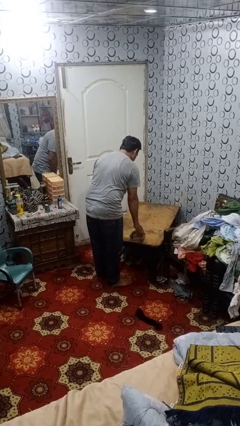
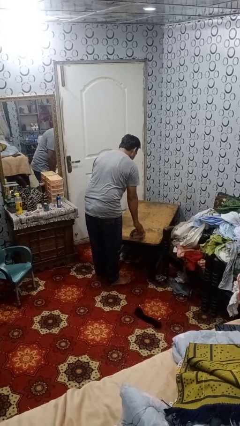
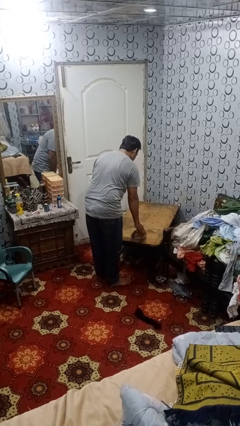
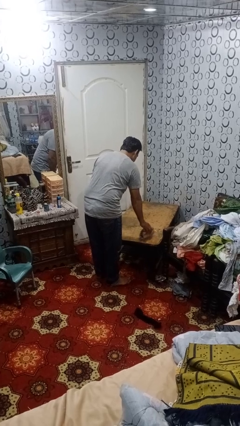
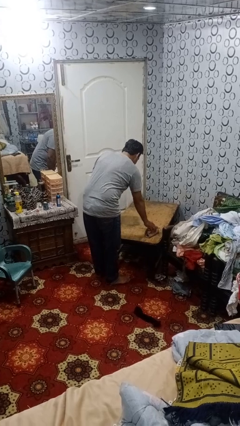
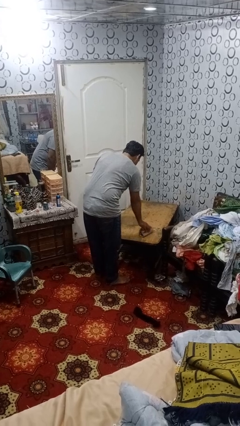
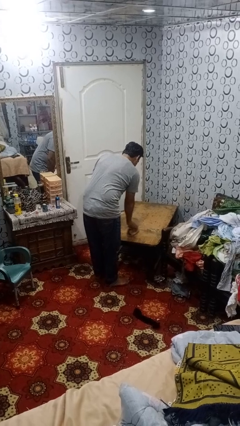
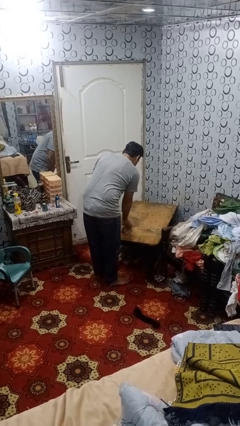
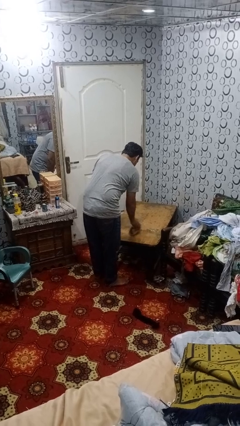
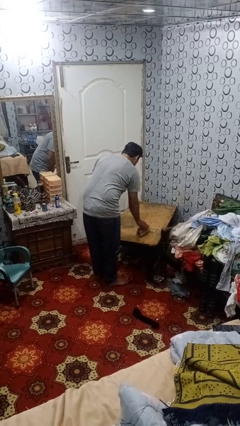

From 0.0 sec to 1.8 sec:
person cleans table with rag

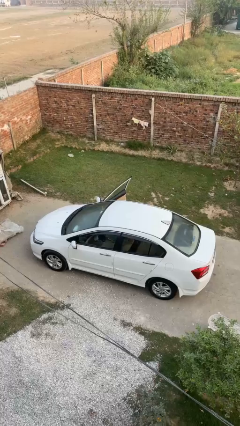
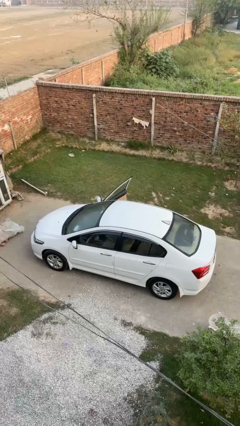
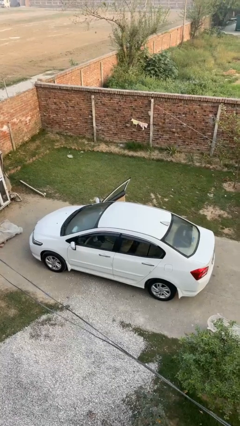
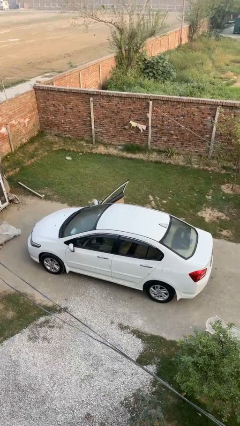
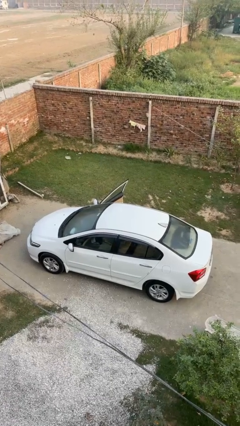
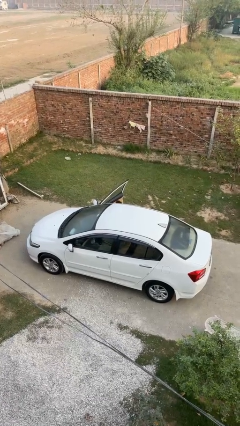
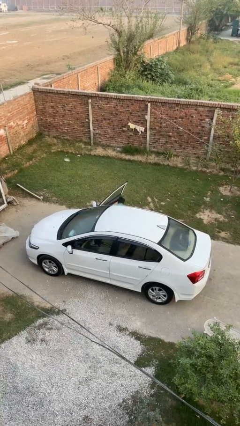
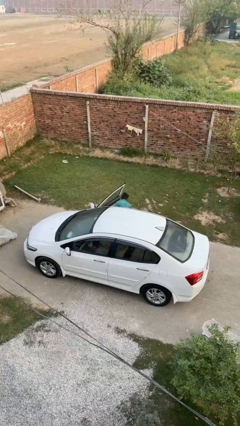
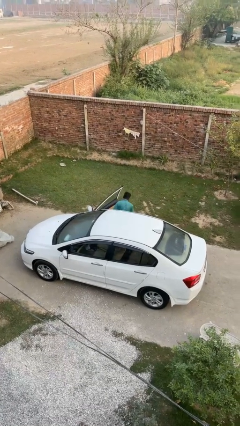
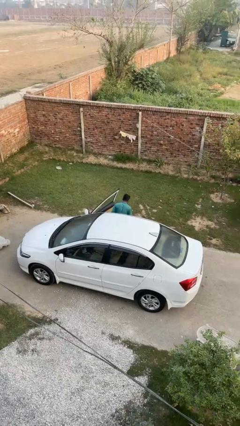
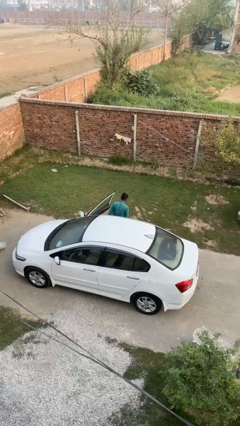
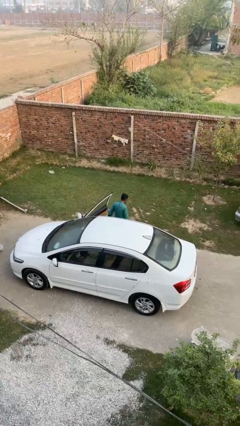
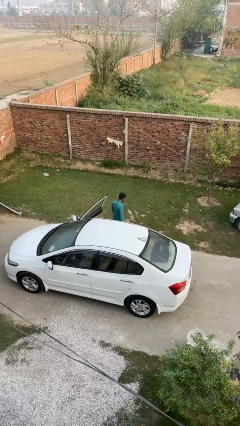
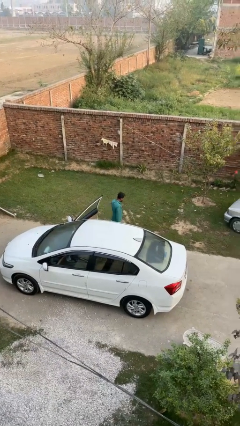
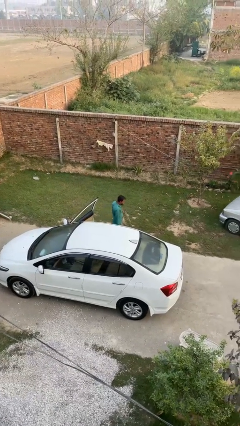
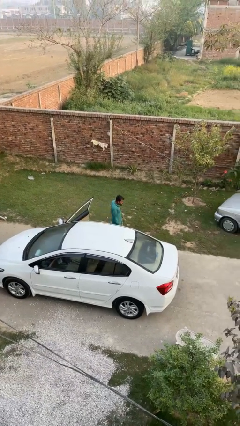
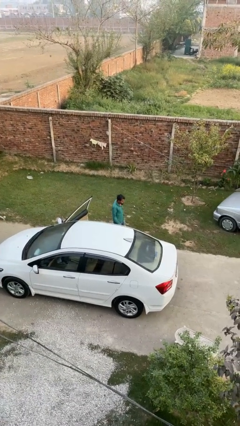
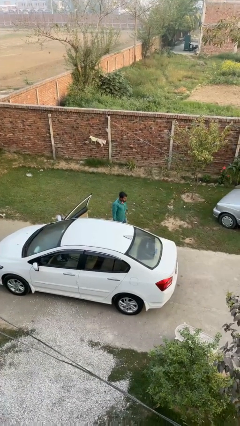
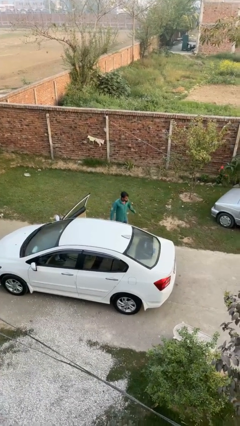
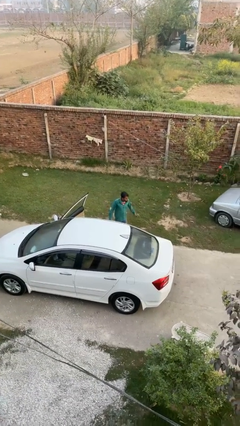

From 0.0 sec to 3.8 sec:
person exits car

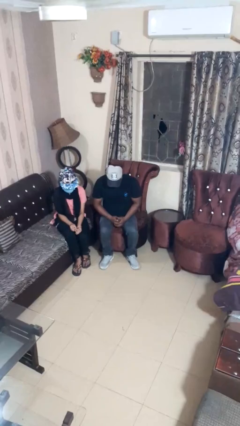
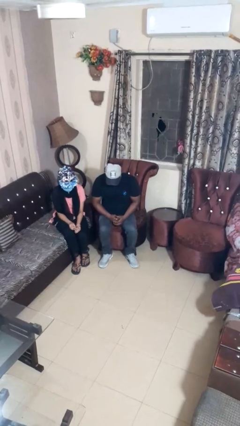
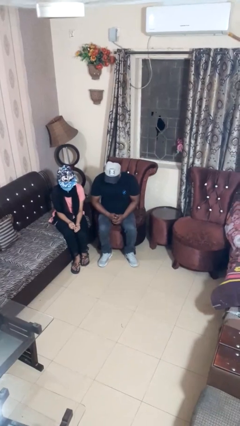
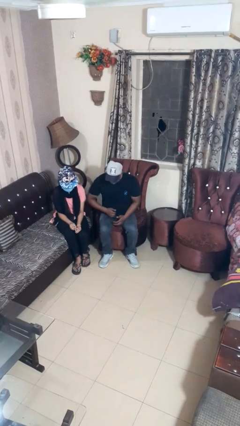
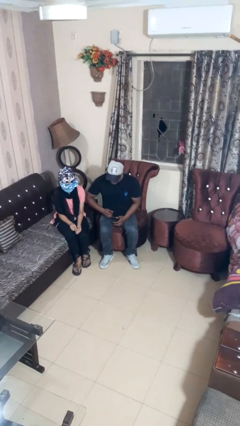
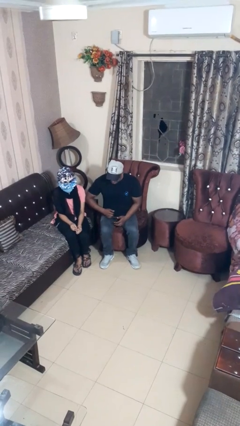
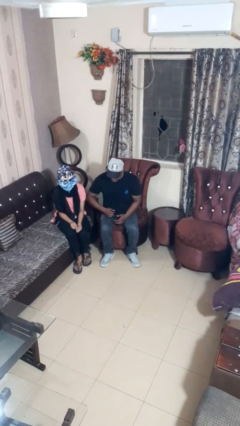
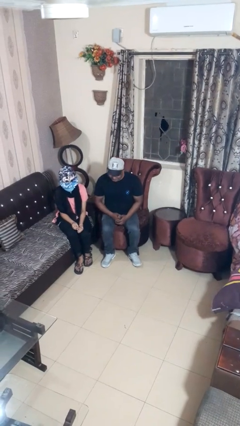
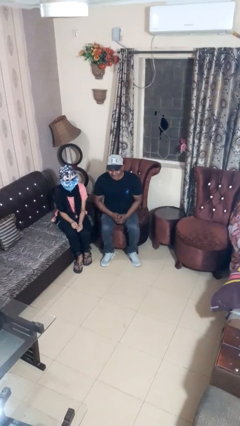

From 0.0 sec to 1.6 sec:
person nudges person with elbow

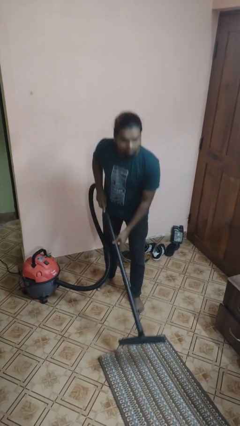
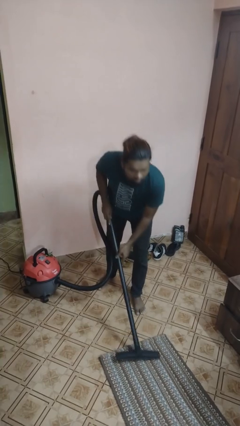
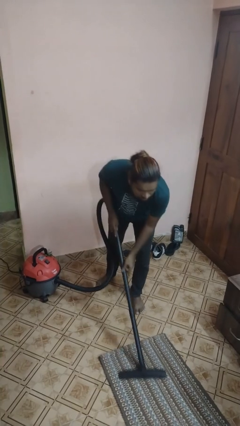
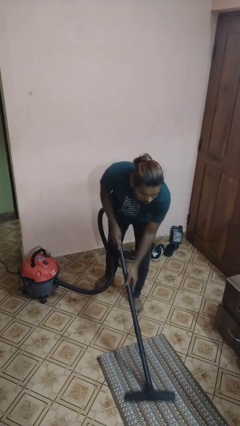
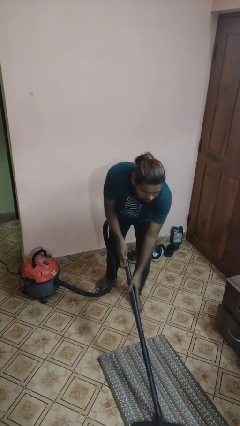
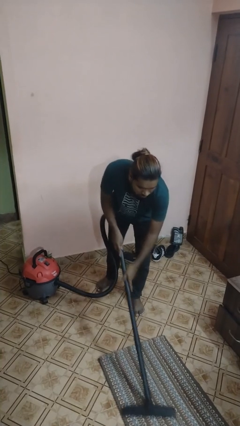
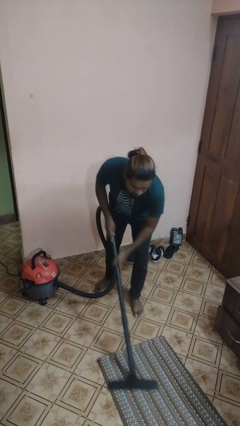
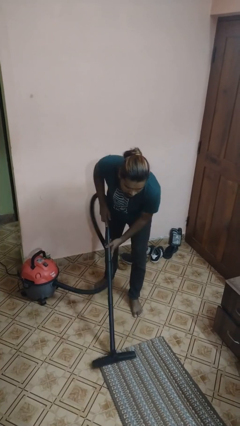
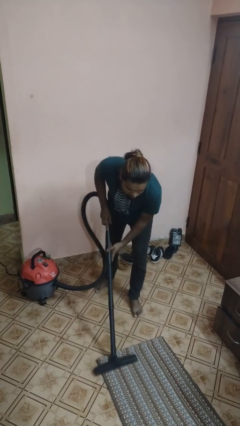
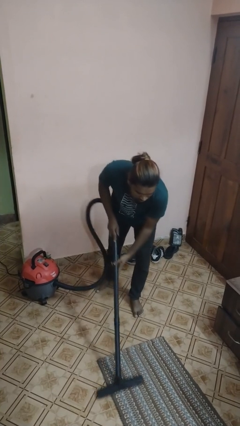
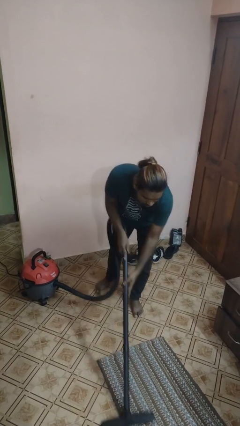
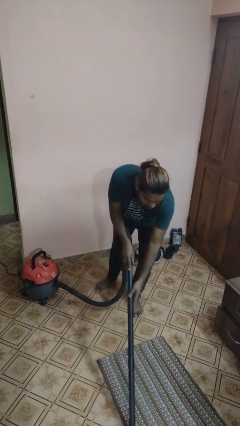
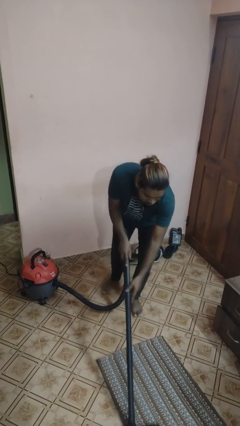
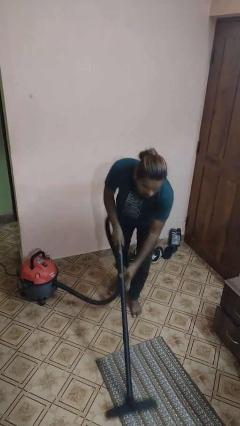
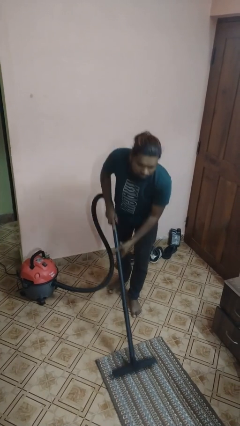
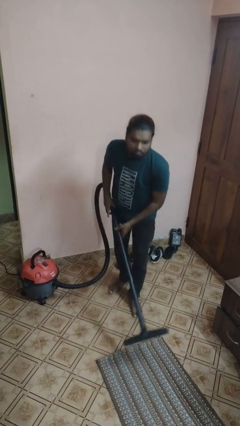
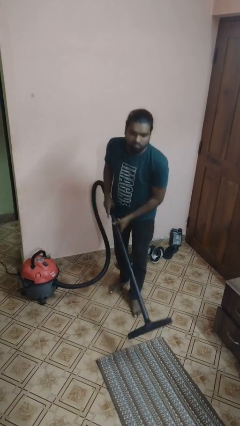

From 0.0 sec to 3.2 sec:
person vacuums carpet

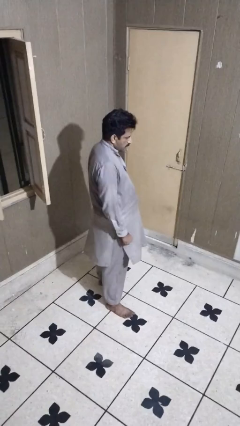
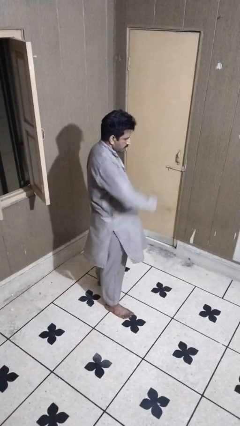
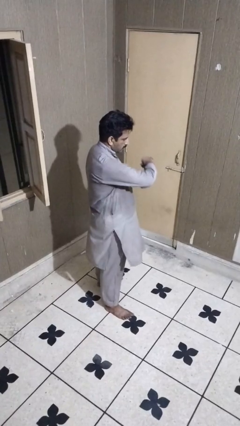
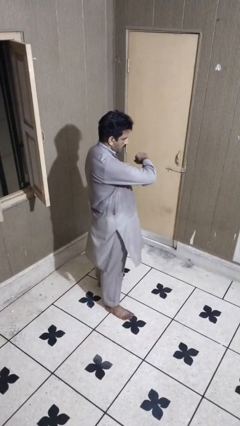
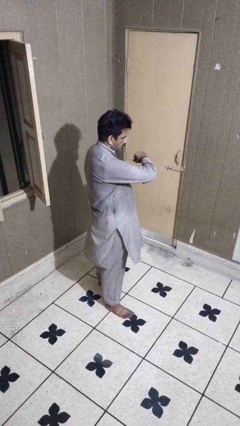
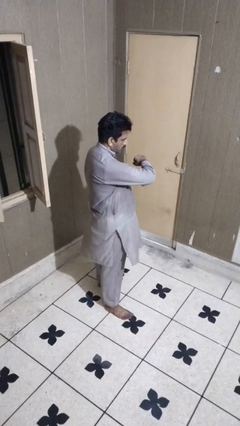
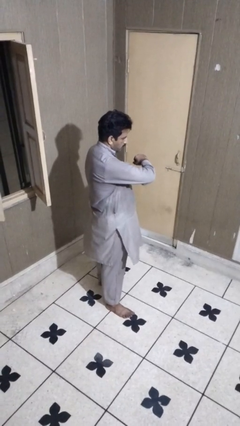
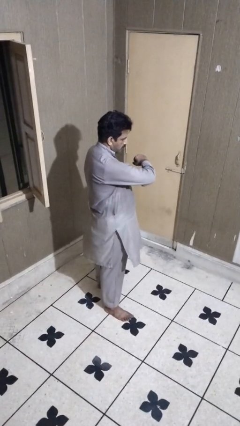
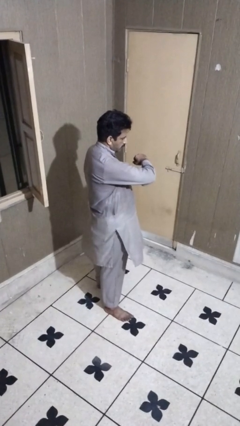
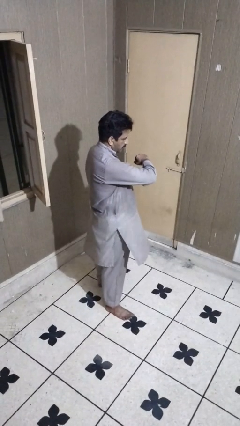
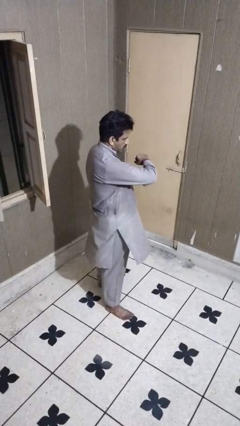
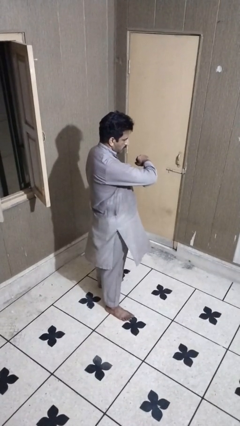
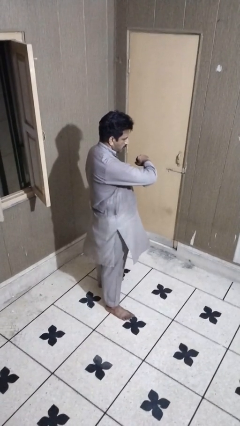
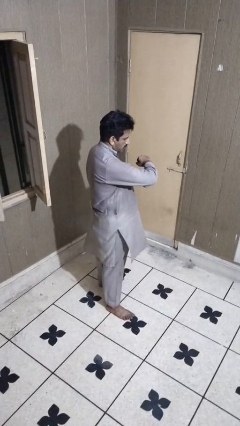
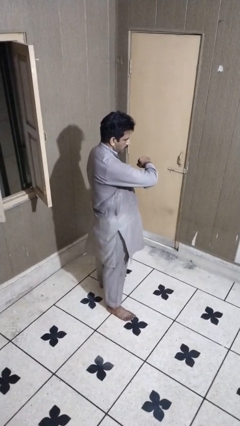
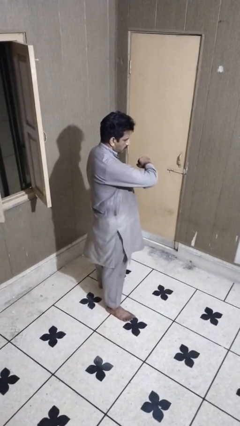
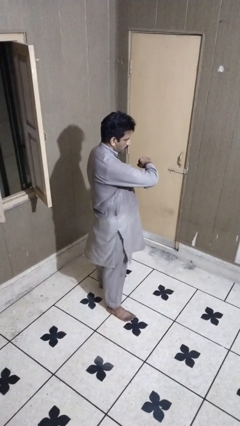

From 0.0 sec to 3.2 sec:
person karate chop

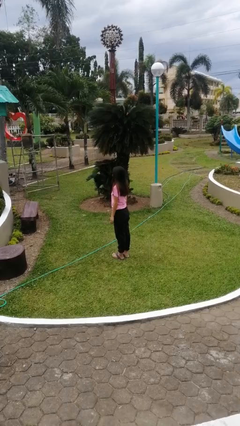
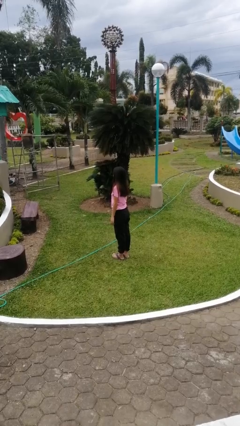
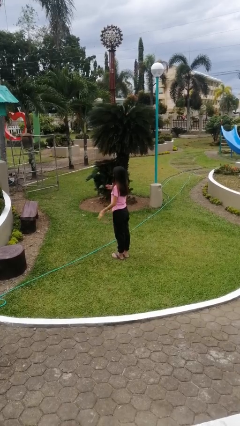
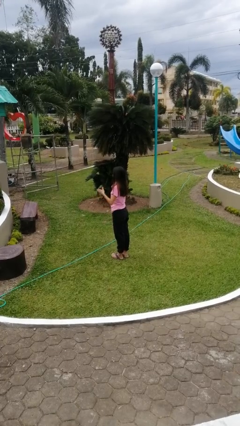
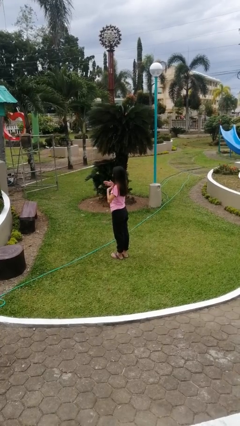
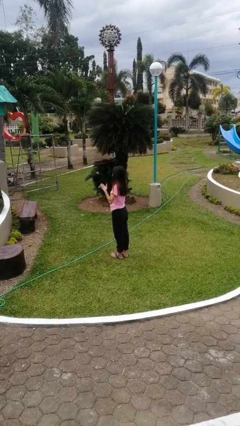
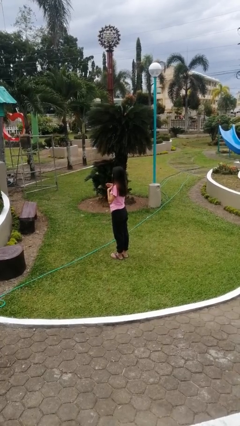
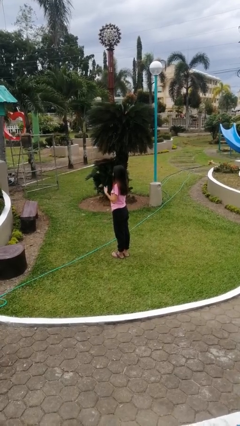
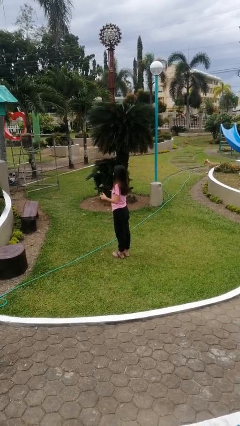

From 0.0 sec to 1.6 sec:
person drums on chest

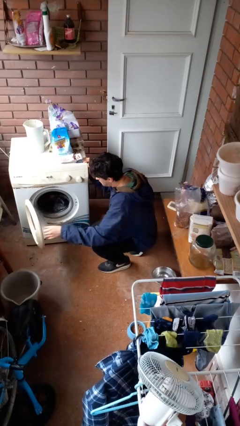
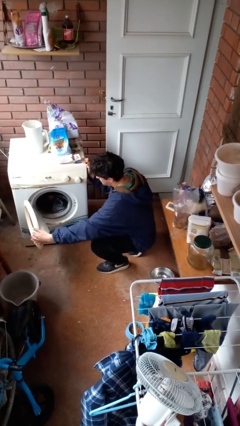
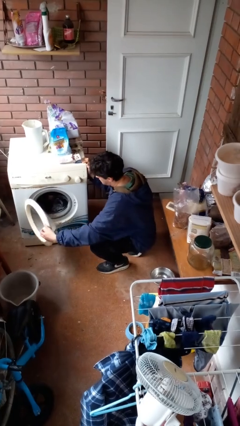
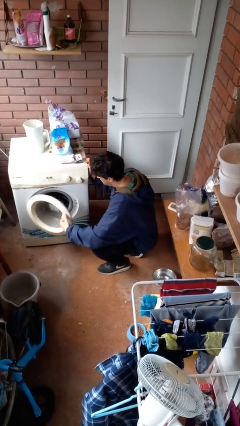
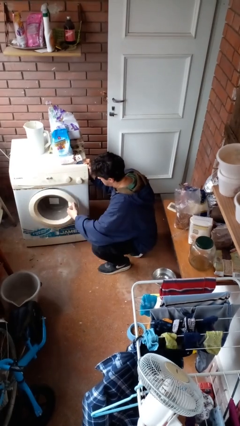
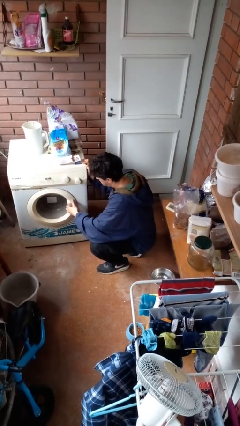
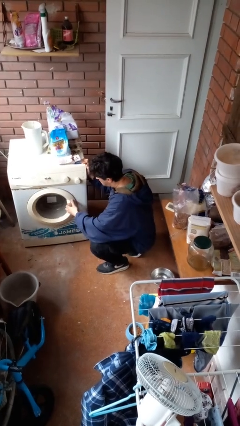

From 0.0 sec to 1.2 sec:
person closes clothes washer

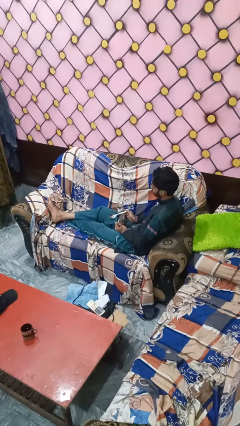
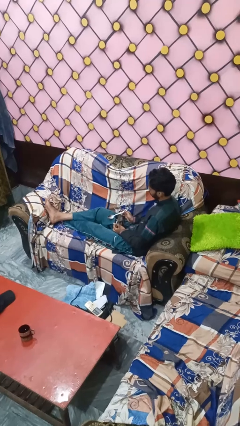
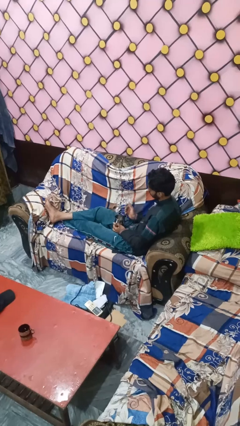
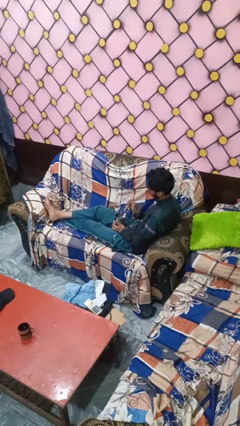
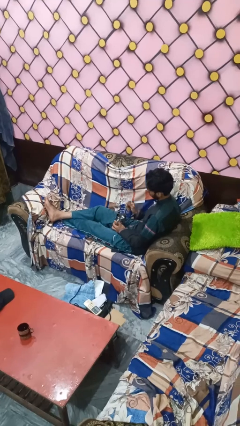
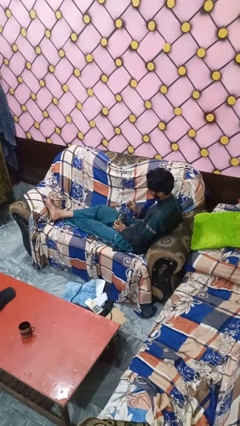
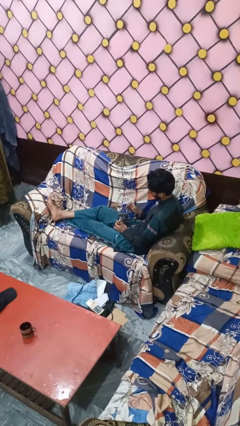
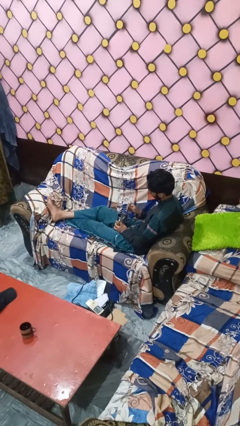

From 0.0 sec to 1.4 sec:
person stirs mug
